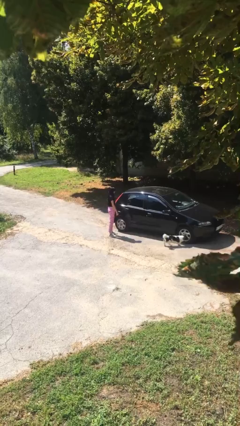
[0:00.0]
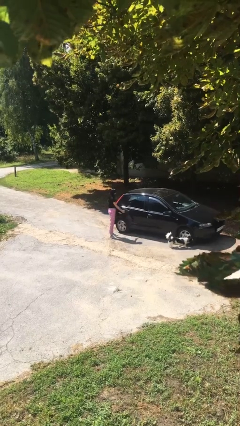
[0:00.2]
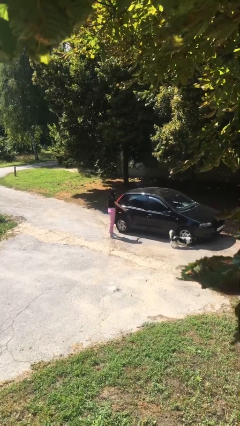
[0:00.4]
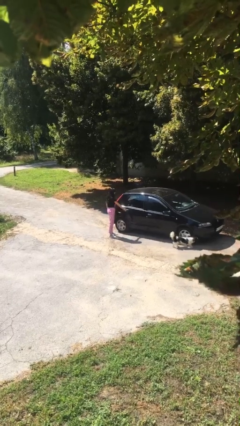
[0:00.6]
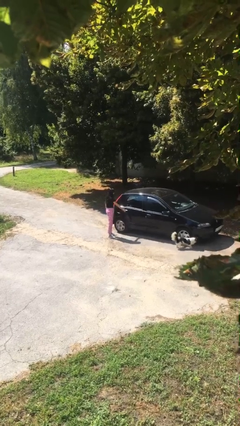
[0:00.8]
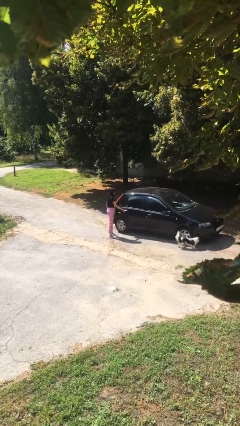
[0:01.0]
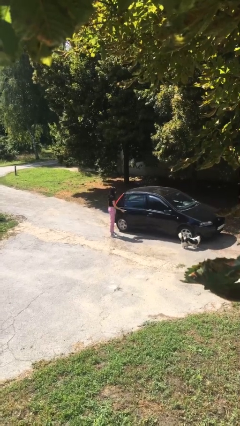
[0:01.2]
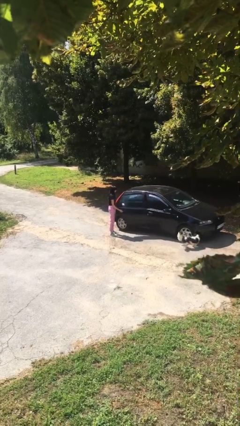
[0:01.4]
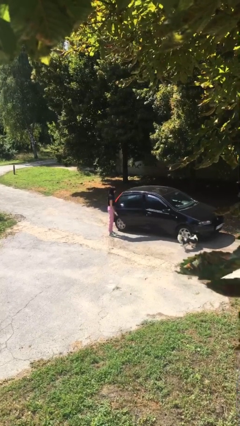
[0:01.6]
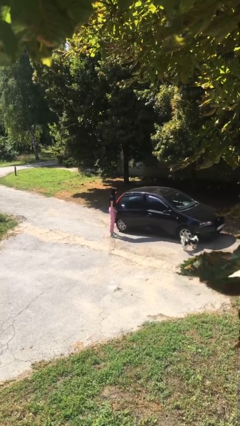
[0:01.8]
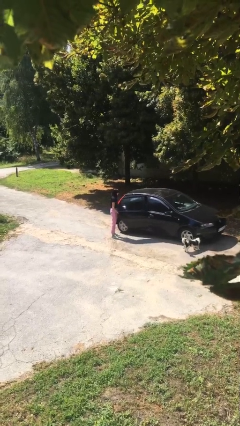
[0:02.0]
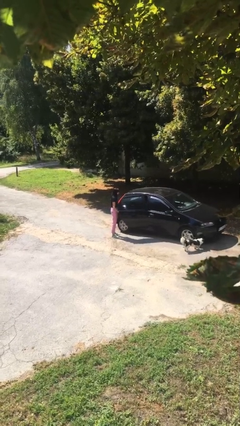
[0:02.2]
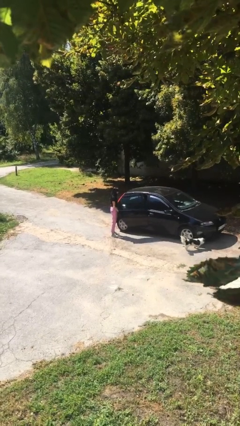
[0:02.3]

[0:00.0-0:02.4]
person opens car door

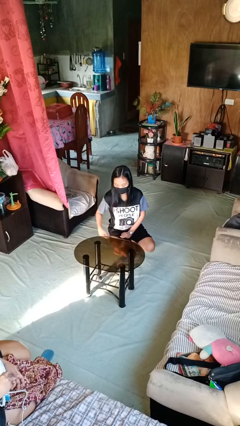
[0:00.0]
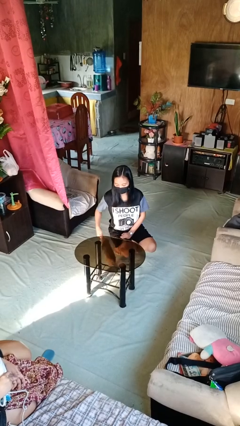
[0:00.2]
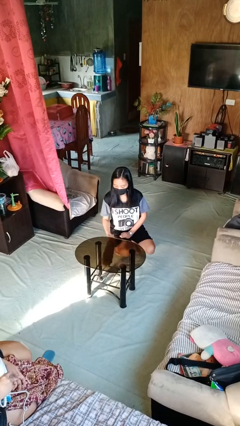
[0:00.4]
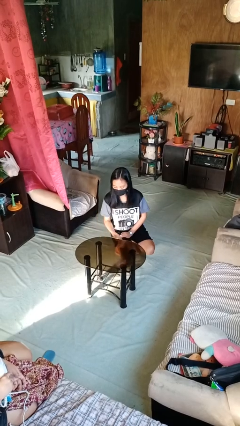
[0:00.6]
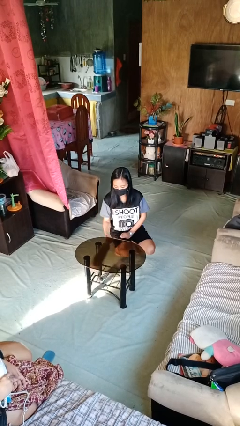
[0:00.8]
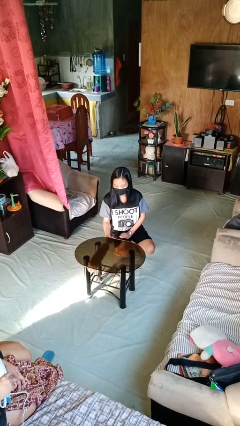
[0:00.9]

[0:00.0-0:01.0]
person dusts furniture

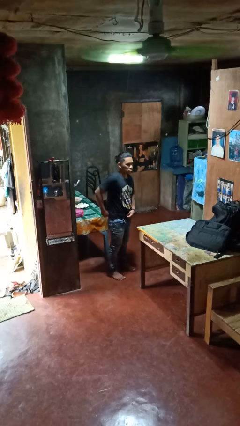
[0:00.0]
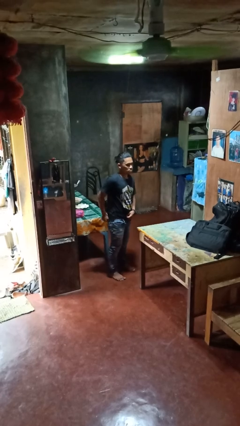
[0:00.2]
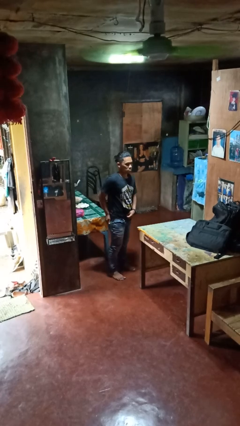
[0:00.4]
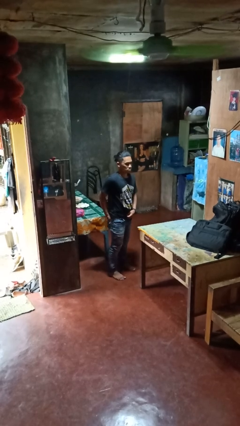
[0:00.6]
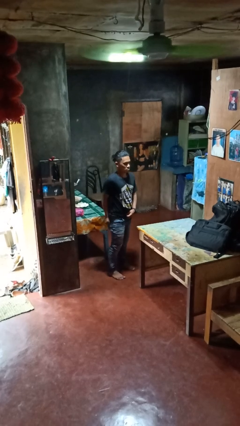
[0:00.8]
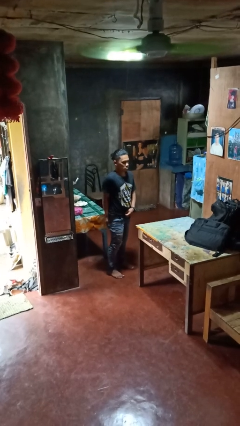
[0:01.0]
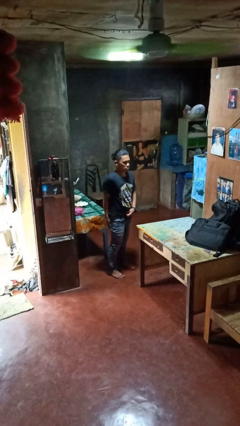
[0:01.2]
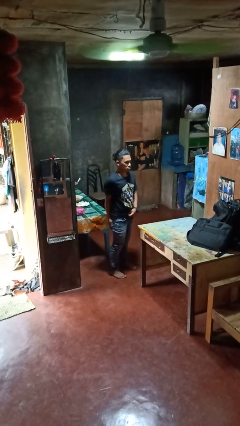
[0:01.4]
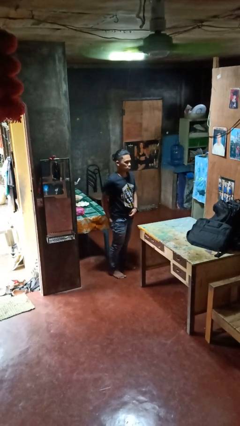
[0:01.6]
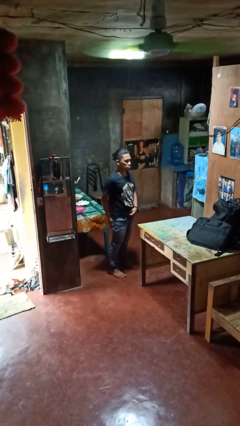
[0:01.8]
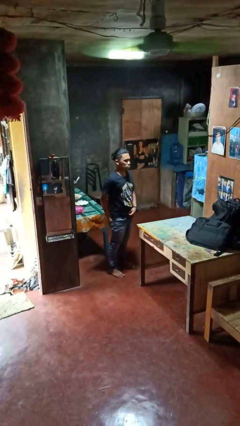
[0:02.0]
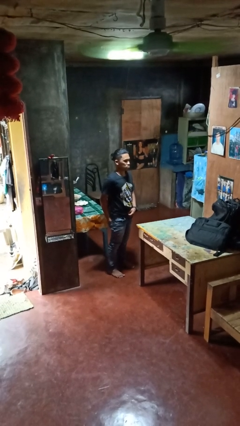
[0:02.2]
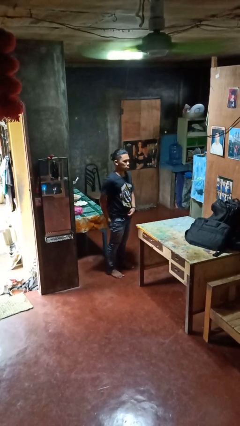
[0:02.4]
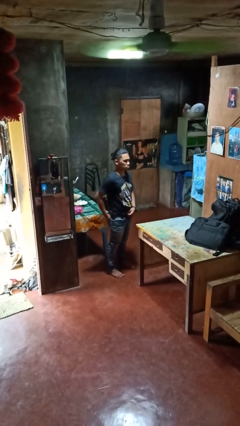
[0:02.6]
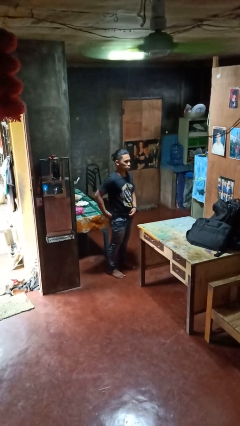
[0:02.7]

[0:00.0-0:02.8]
person puts hands in back pockets

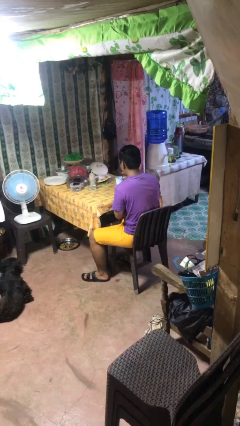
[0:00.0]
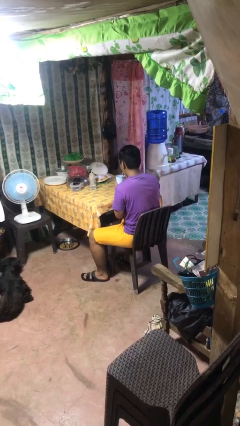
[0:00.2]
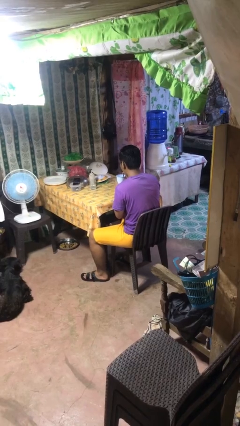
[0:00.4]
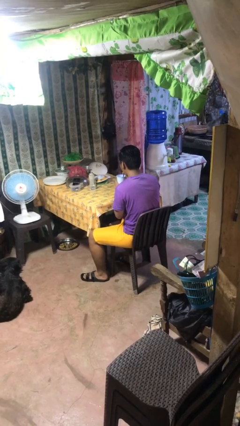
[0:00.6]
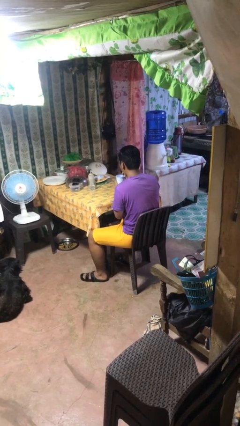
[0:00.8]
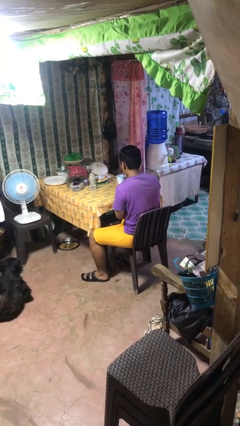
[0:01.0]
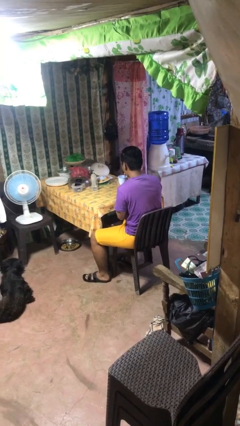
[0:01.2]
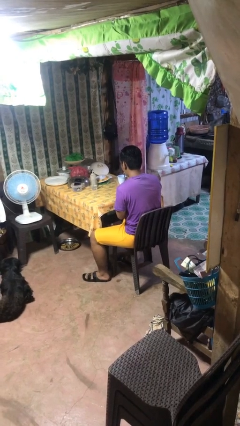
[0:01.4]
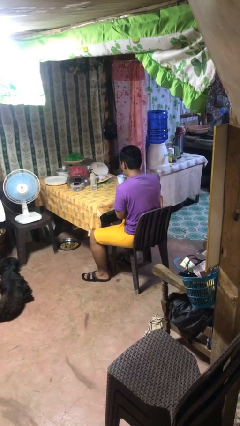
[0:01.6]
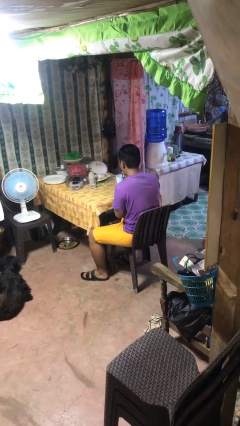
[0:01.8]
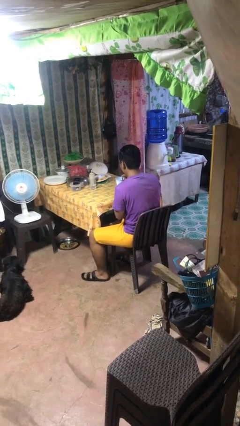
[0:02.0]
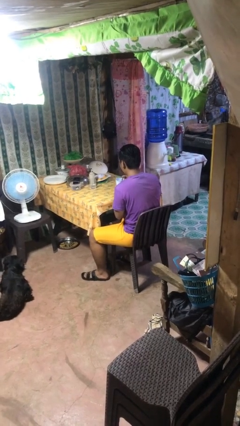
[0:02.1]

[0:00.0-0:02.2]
person drinks from straw

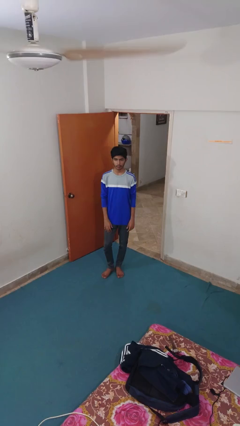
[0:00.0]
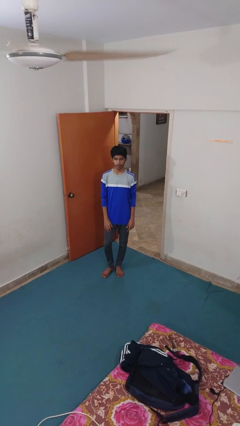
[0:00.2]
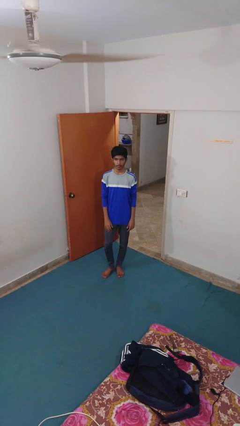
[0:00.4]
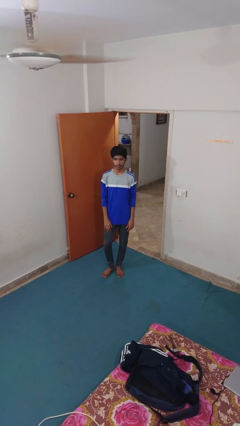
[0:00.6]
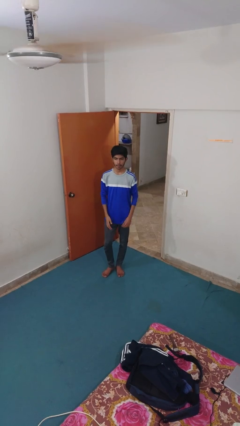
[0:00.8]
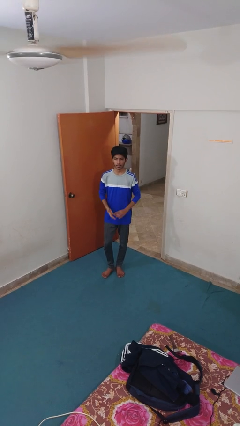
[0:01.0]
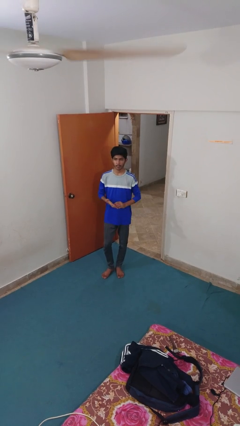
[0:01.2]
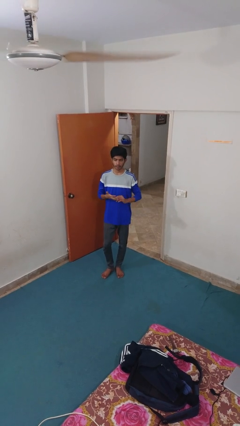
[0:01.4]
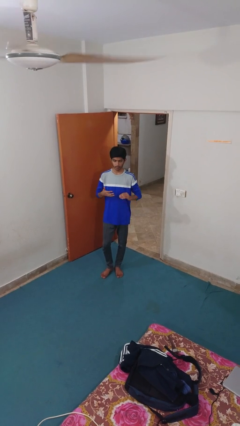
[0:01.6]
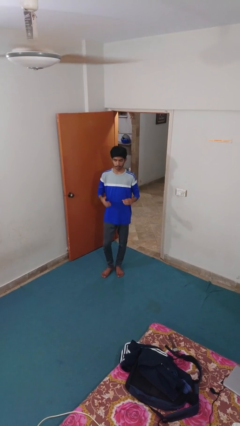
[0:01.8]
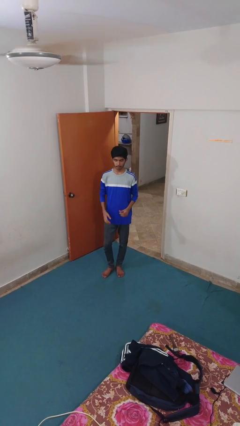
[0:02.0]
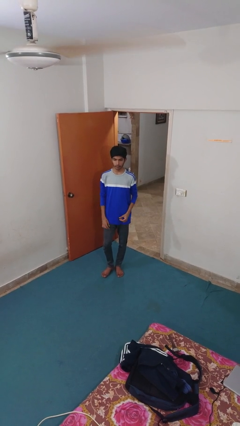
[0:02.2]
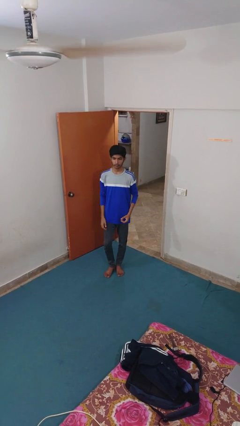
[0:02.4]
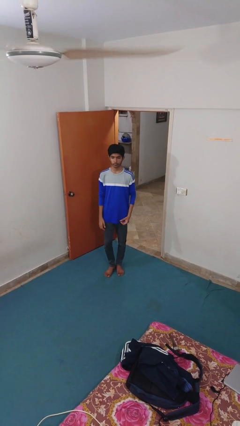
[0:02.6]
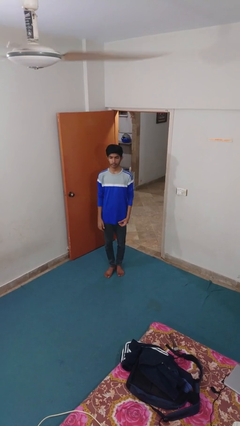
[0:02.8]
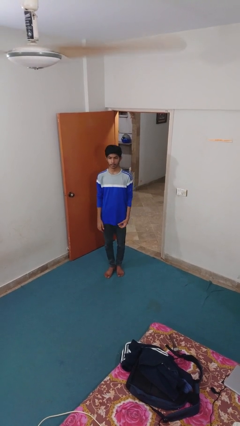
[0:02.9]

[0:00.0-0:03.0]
person takes off ring

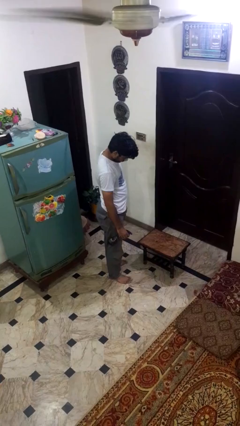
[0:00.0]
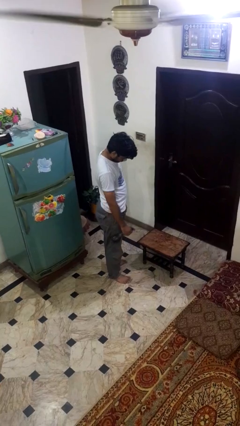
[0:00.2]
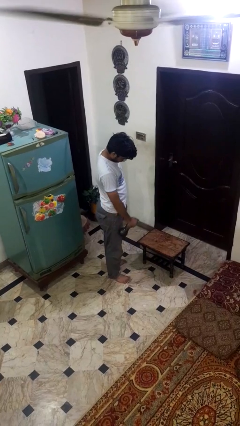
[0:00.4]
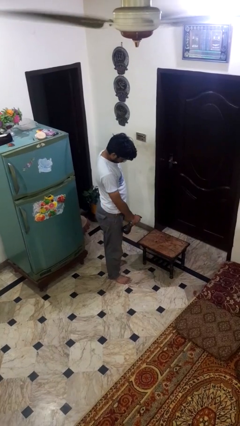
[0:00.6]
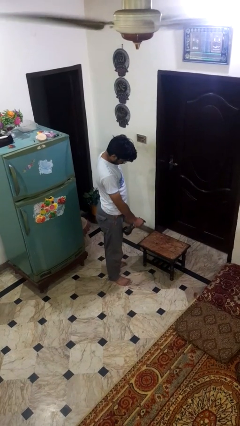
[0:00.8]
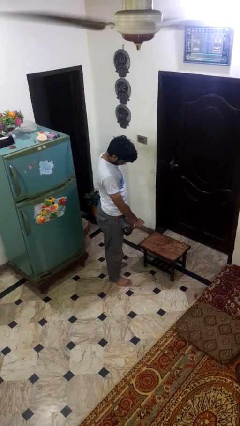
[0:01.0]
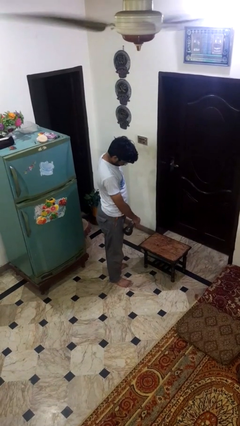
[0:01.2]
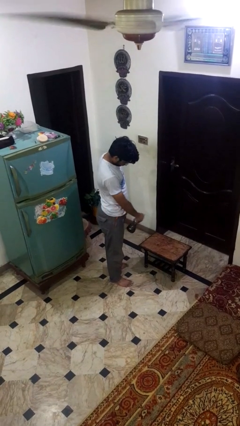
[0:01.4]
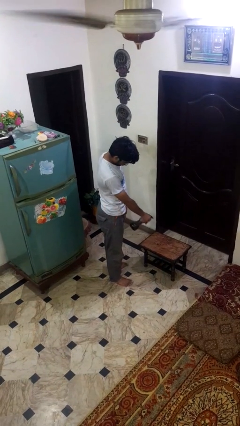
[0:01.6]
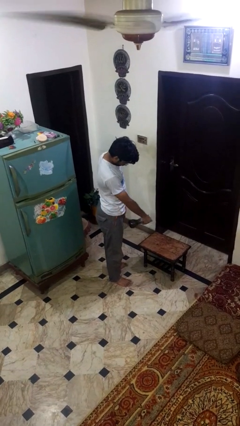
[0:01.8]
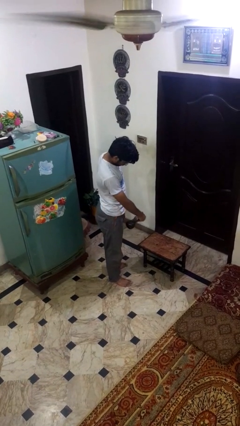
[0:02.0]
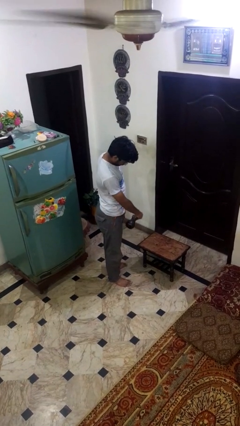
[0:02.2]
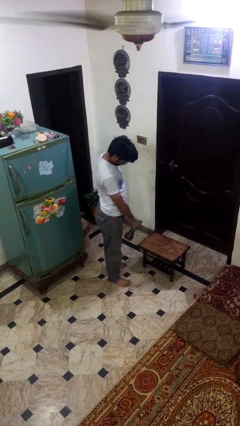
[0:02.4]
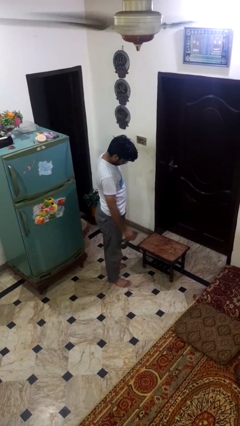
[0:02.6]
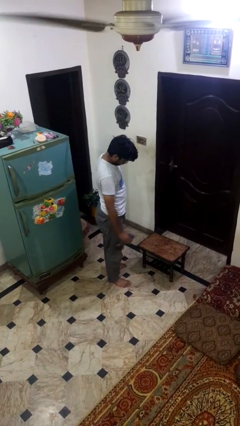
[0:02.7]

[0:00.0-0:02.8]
person sprays from bottle

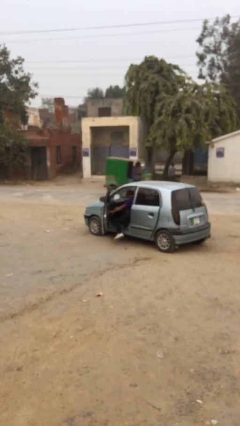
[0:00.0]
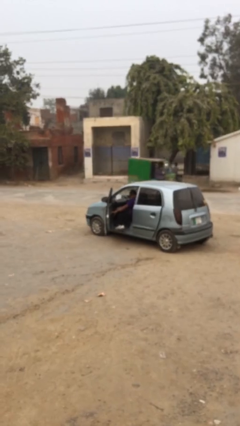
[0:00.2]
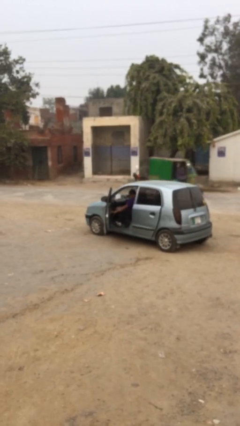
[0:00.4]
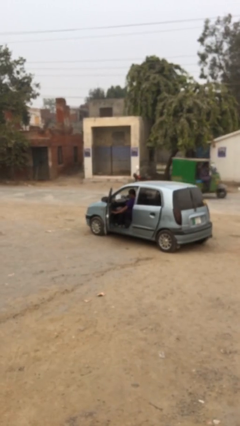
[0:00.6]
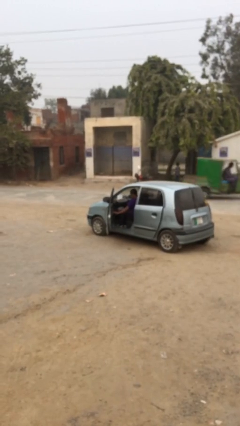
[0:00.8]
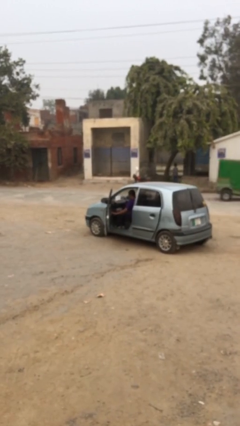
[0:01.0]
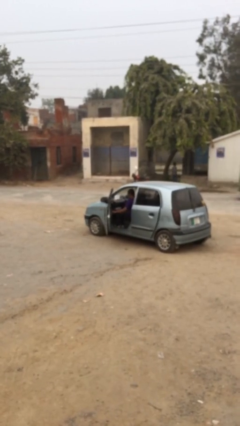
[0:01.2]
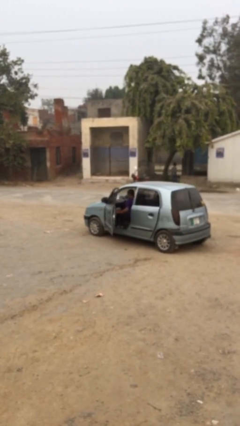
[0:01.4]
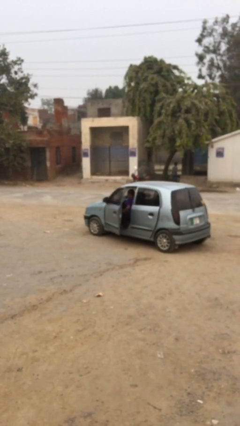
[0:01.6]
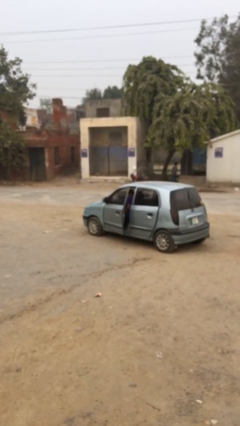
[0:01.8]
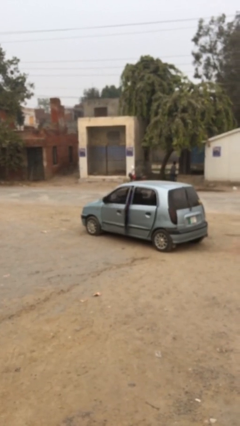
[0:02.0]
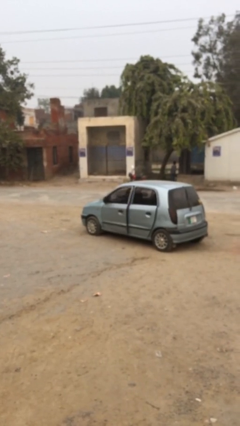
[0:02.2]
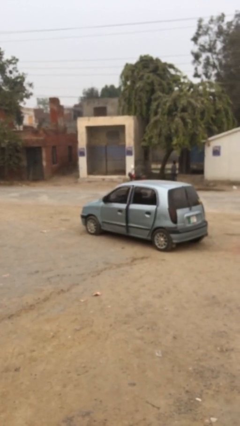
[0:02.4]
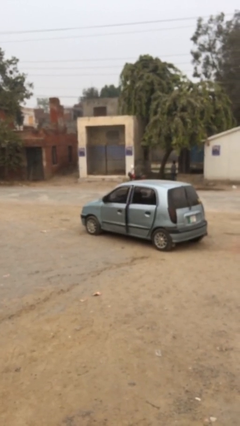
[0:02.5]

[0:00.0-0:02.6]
person closes car door
